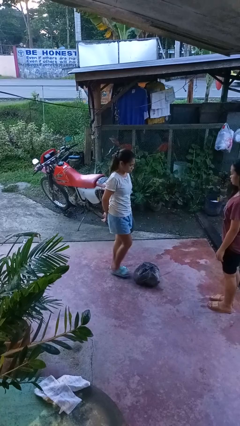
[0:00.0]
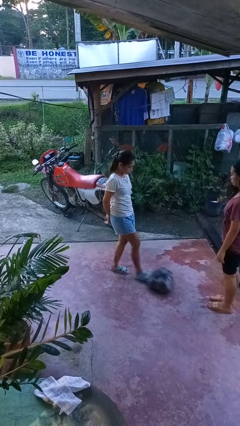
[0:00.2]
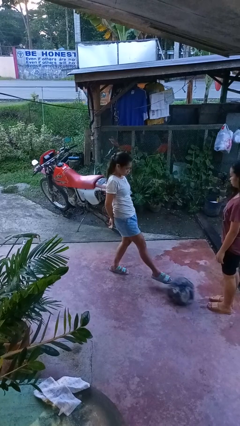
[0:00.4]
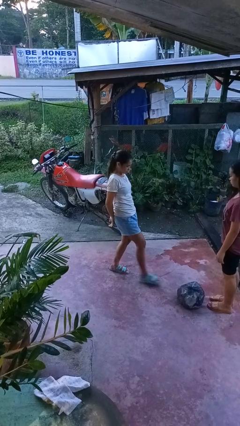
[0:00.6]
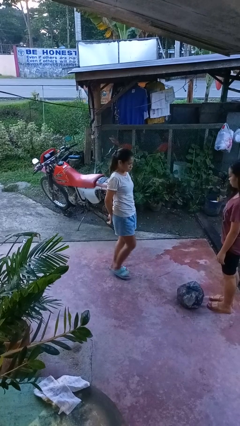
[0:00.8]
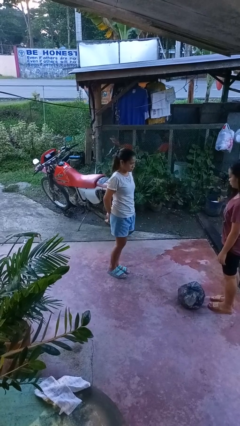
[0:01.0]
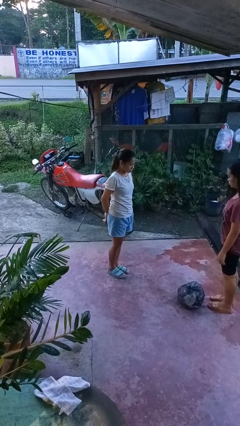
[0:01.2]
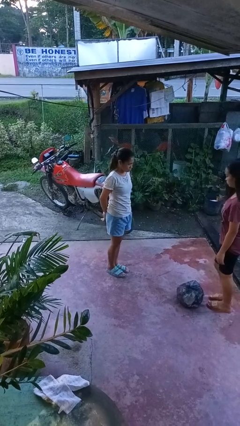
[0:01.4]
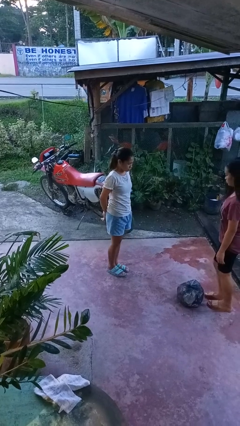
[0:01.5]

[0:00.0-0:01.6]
person kicks object to person

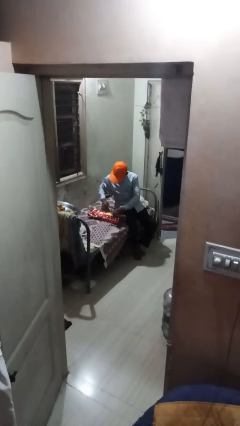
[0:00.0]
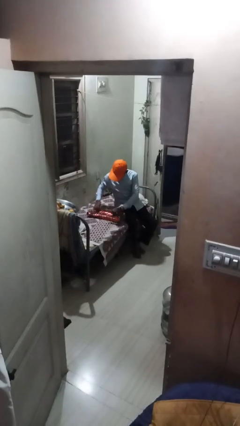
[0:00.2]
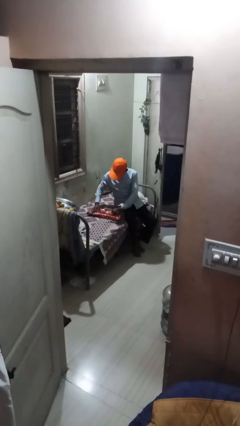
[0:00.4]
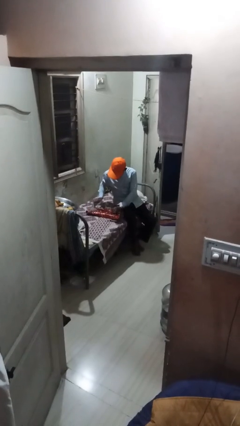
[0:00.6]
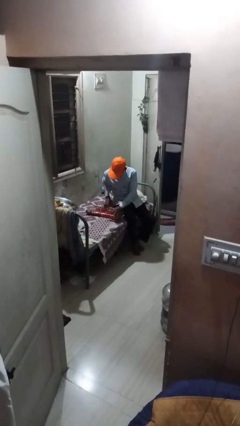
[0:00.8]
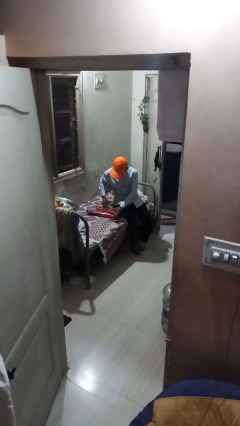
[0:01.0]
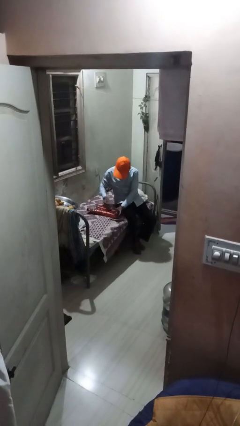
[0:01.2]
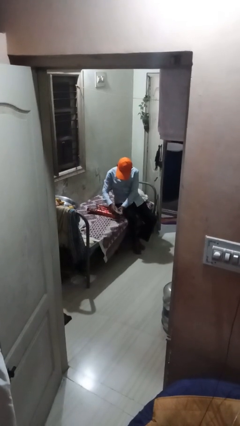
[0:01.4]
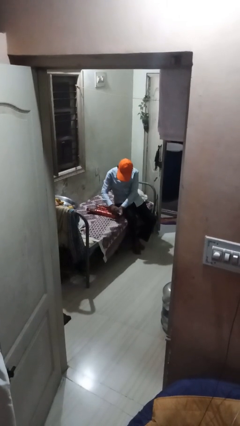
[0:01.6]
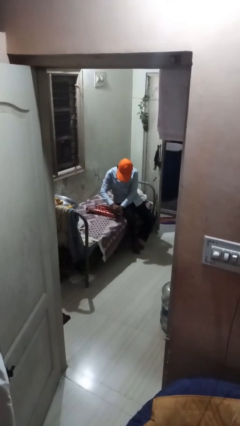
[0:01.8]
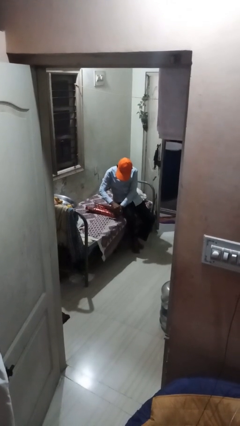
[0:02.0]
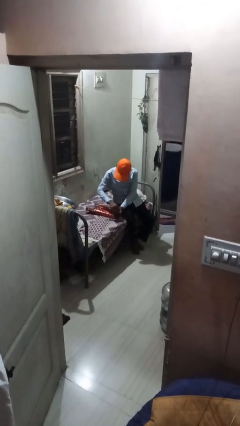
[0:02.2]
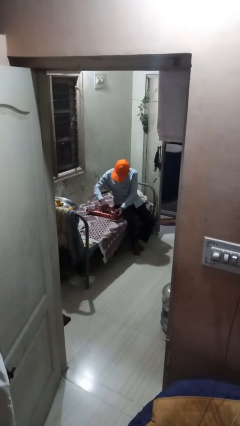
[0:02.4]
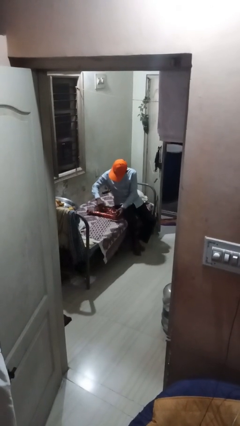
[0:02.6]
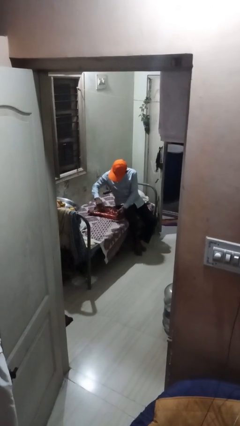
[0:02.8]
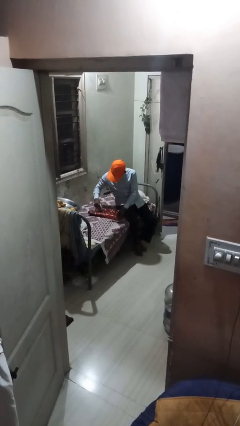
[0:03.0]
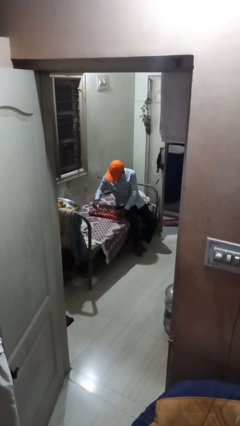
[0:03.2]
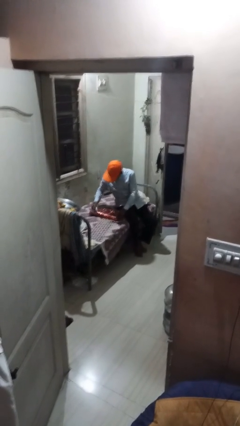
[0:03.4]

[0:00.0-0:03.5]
person wraps box

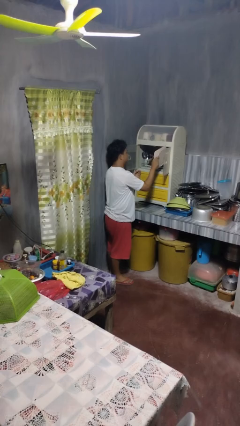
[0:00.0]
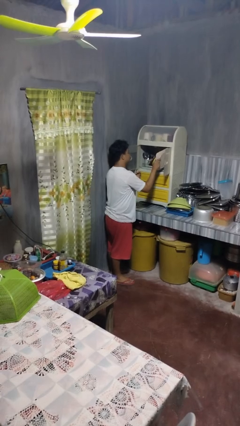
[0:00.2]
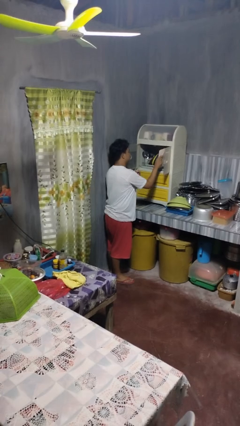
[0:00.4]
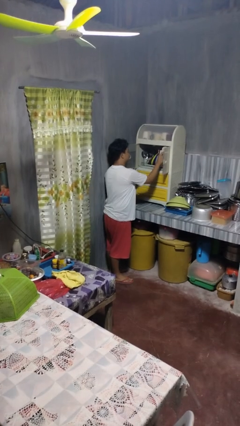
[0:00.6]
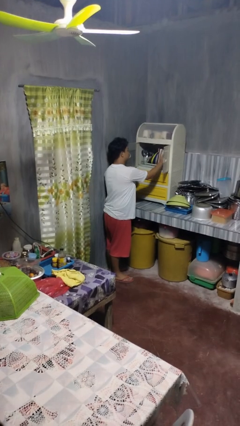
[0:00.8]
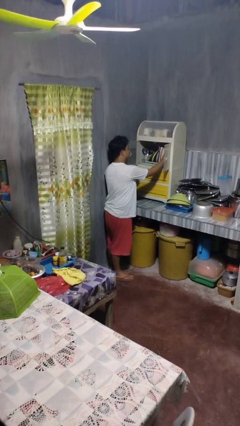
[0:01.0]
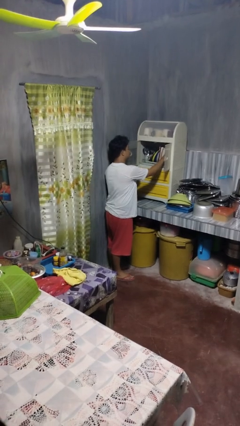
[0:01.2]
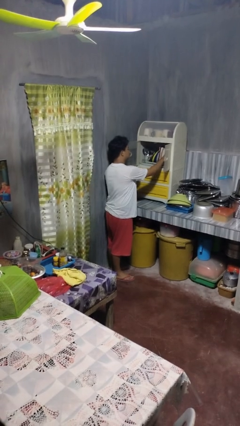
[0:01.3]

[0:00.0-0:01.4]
person puts down object into cabinet

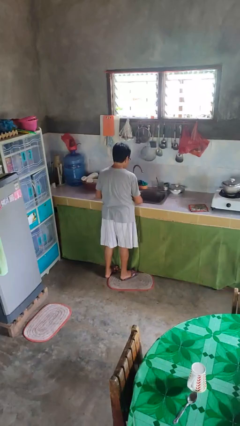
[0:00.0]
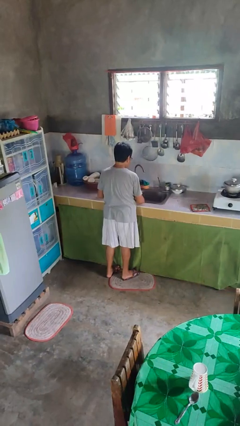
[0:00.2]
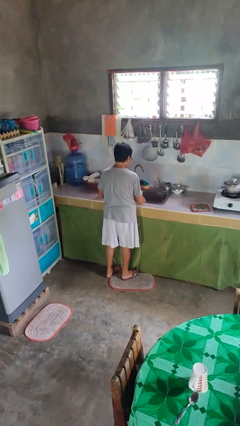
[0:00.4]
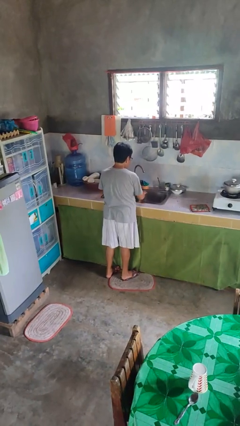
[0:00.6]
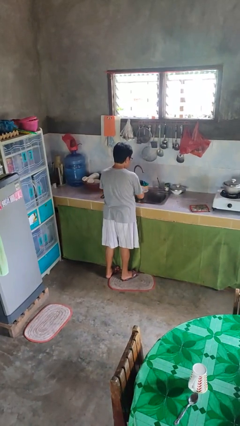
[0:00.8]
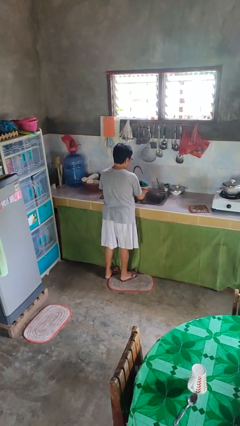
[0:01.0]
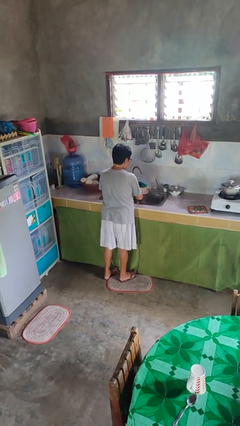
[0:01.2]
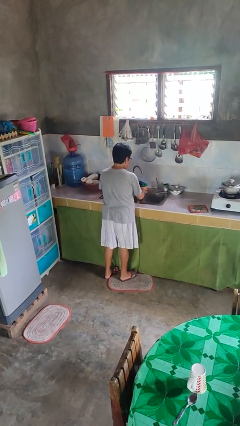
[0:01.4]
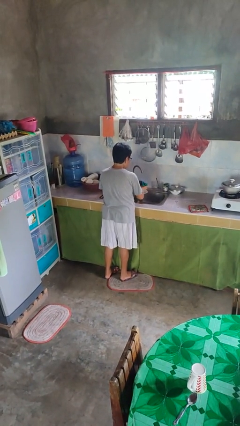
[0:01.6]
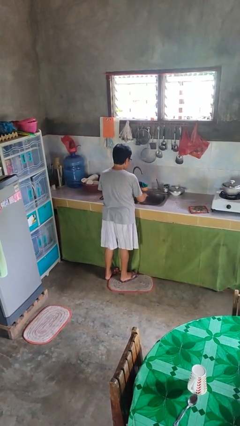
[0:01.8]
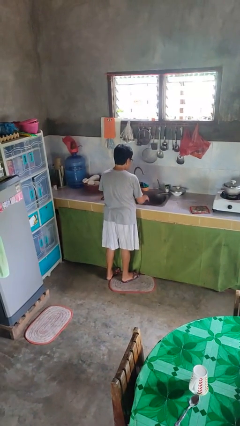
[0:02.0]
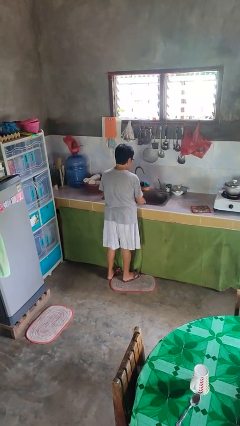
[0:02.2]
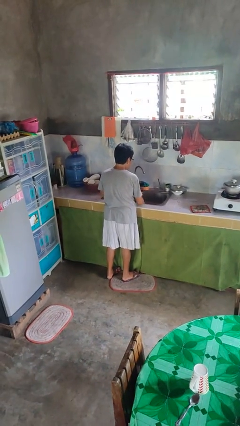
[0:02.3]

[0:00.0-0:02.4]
person washes dish

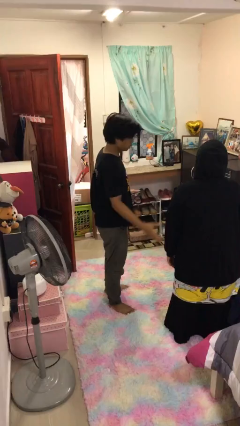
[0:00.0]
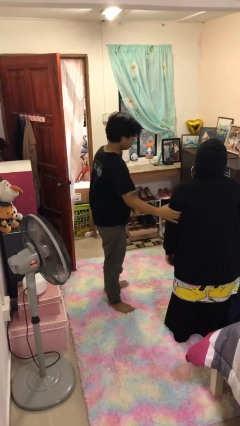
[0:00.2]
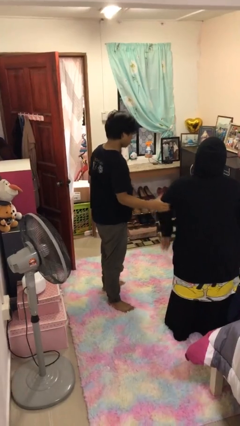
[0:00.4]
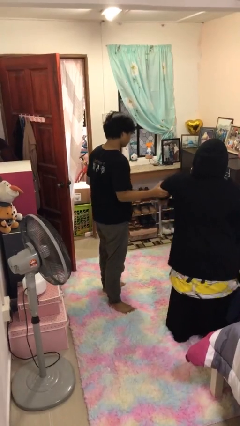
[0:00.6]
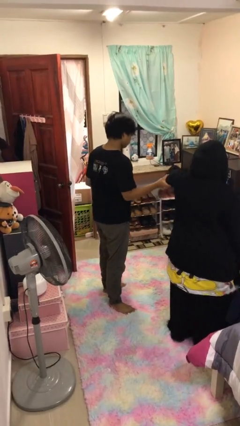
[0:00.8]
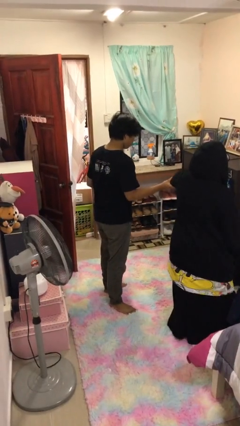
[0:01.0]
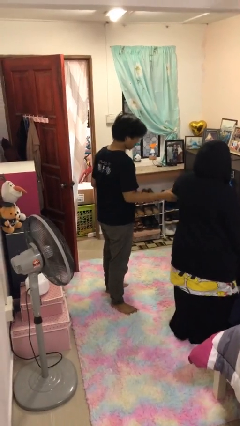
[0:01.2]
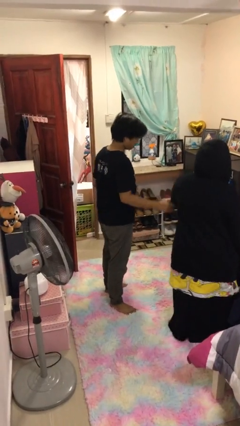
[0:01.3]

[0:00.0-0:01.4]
person grabs person by bicep

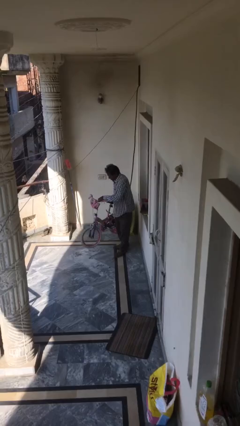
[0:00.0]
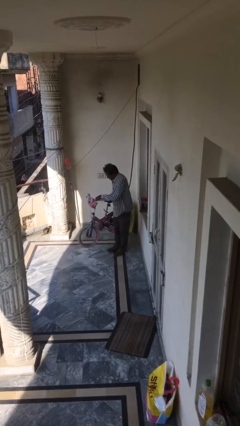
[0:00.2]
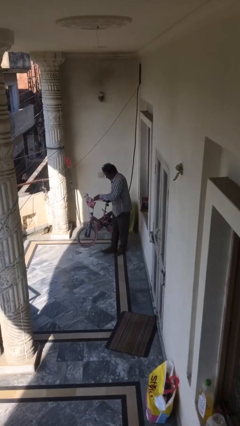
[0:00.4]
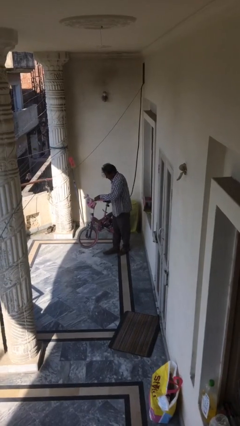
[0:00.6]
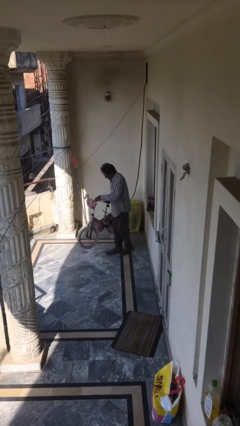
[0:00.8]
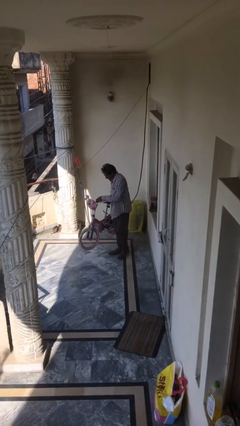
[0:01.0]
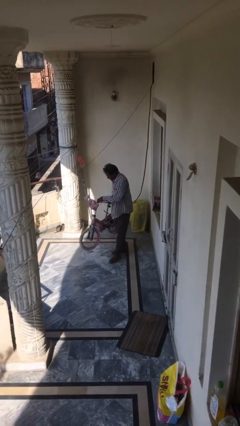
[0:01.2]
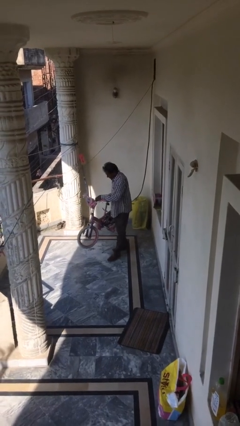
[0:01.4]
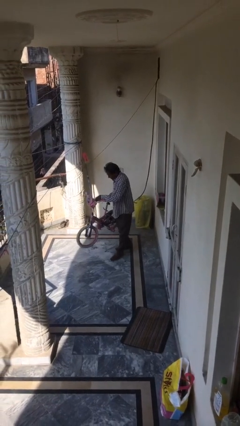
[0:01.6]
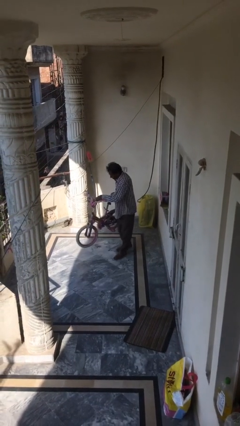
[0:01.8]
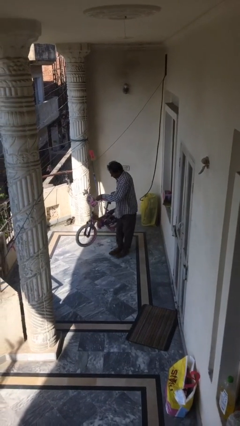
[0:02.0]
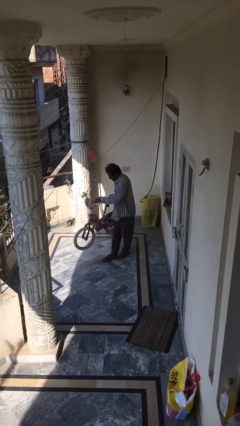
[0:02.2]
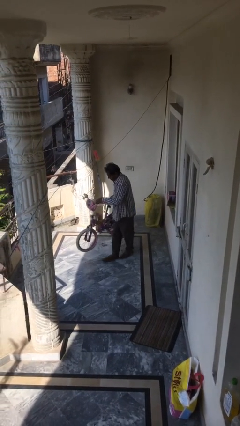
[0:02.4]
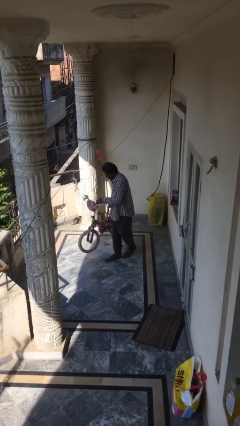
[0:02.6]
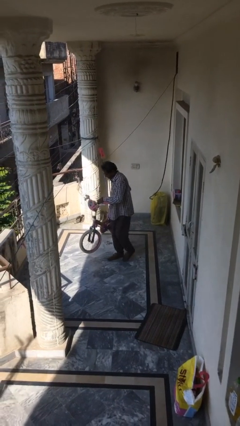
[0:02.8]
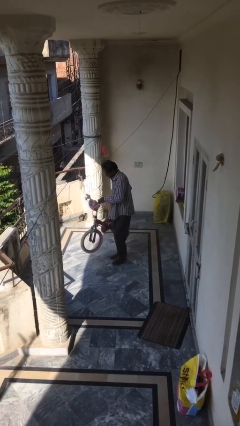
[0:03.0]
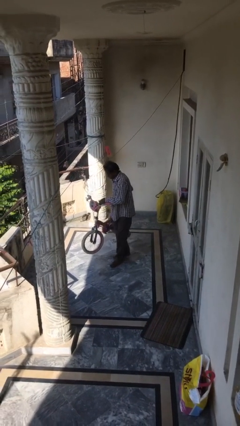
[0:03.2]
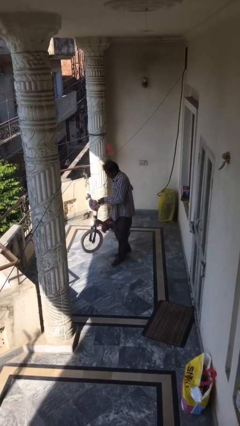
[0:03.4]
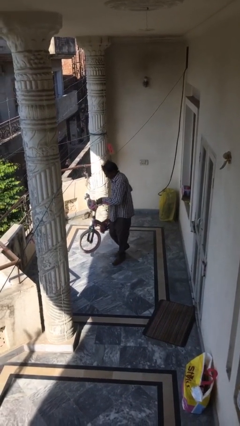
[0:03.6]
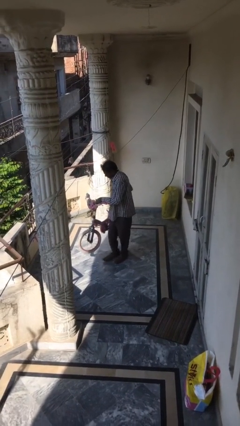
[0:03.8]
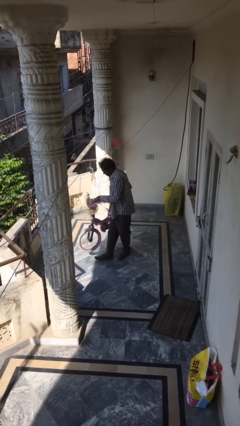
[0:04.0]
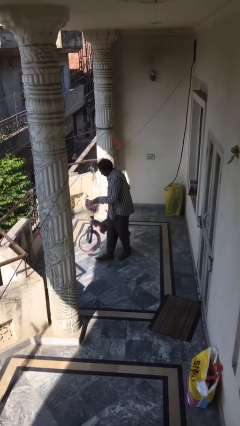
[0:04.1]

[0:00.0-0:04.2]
person carries heavy object

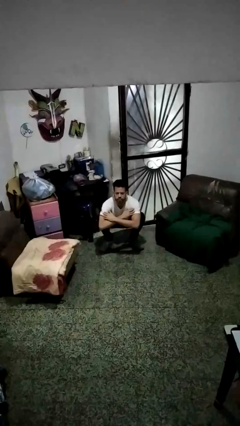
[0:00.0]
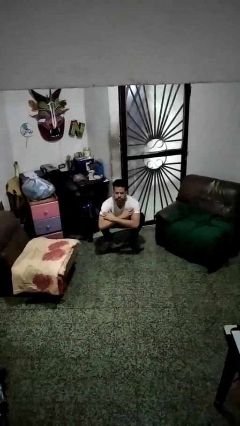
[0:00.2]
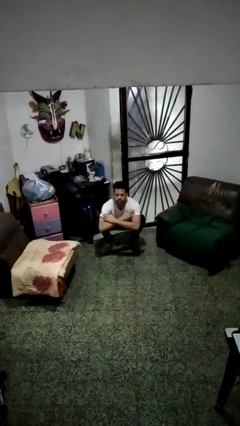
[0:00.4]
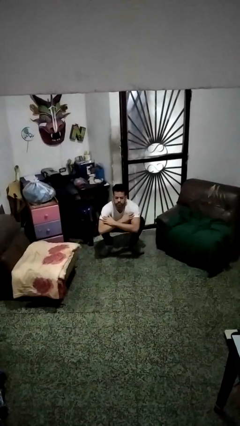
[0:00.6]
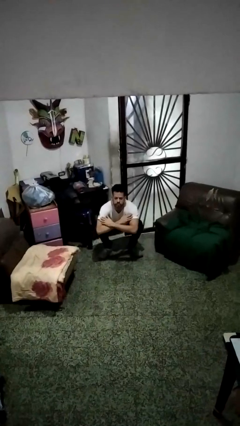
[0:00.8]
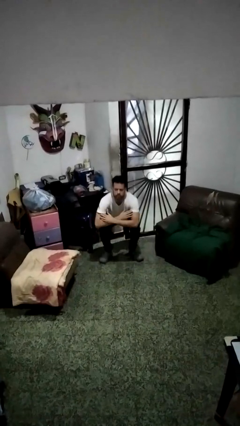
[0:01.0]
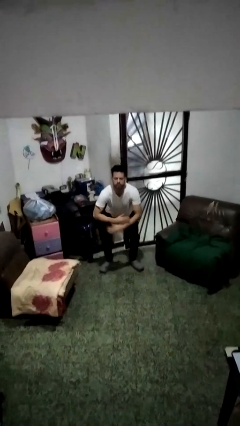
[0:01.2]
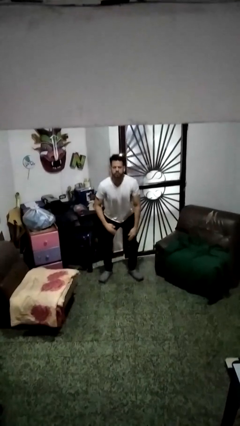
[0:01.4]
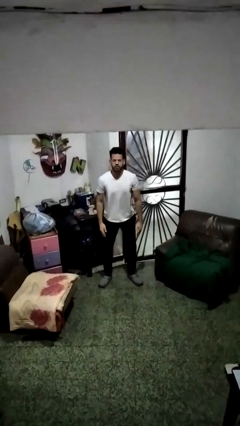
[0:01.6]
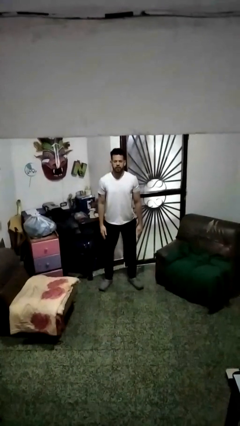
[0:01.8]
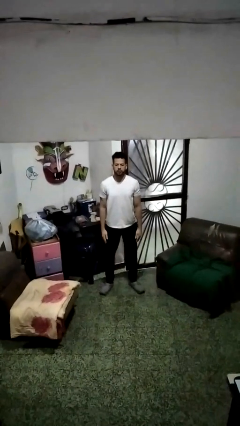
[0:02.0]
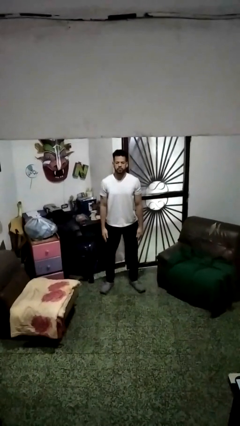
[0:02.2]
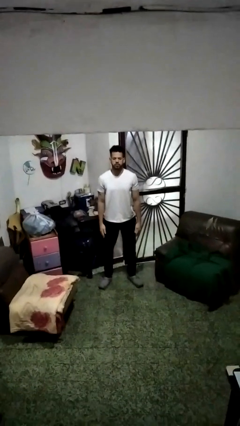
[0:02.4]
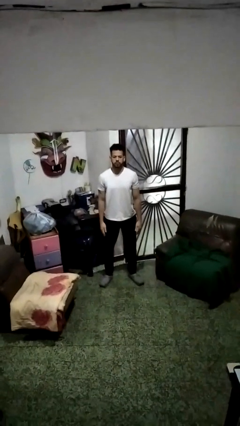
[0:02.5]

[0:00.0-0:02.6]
person stands up

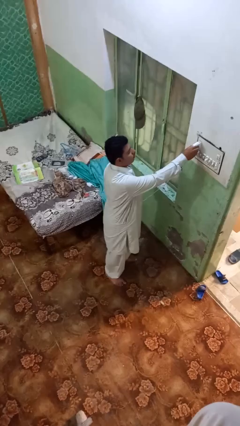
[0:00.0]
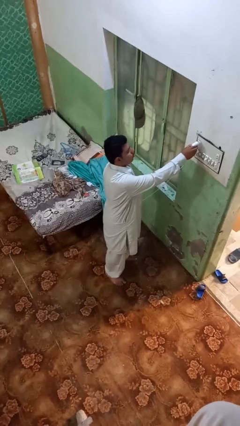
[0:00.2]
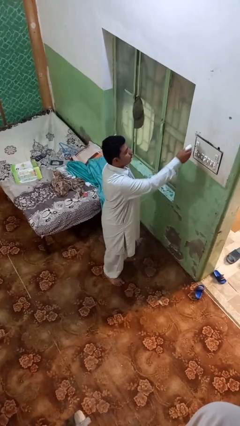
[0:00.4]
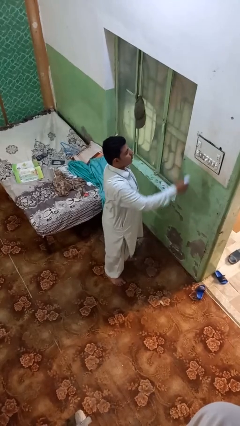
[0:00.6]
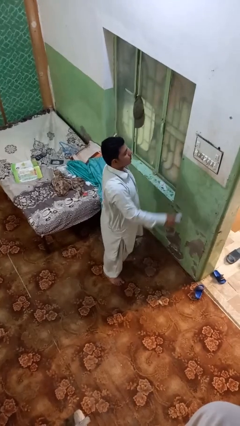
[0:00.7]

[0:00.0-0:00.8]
person unplugs from electrical socket
